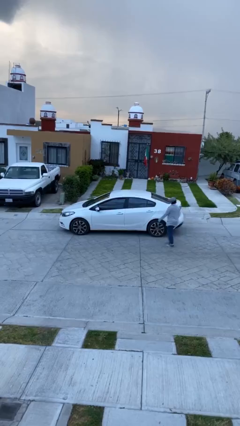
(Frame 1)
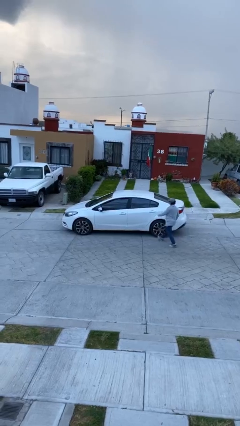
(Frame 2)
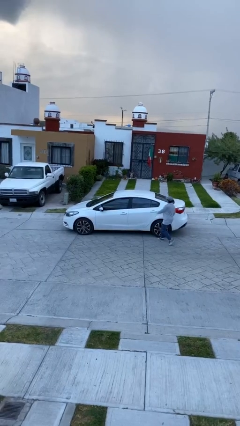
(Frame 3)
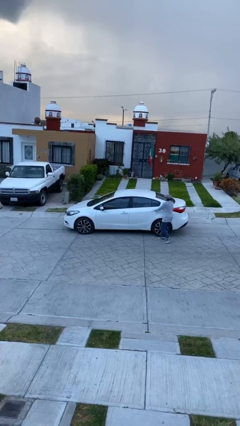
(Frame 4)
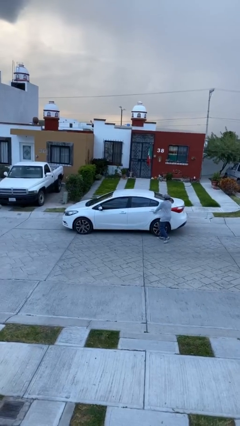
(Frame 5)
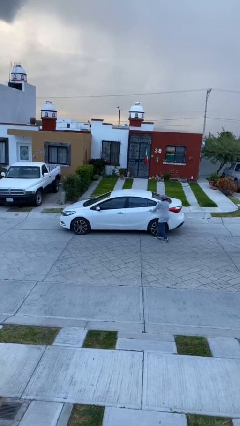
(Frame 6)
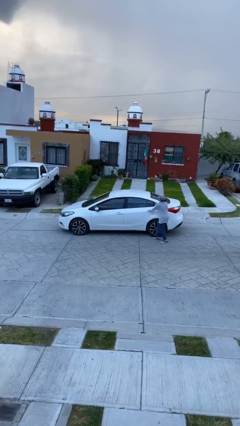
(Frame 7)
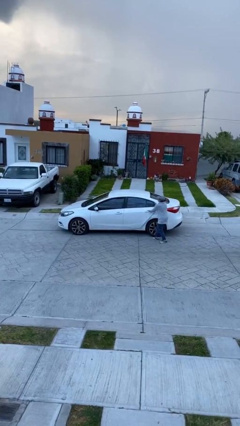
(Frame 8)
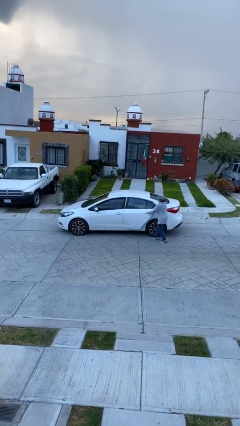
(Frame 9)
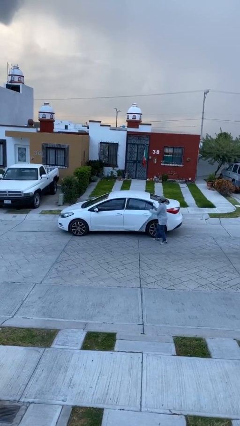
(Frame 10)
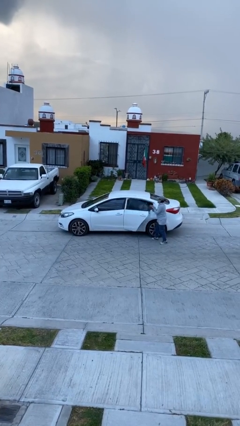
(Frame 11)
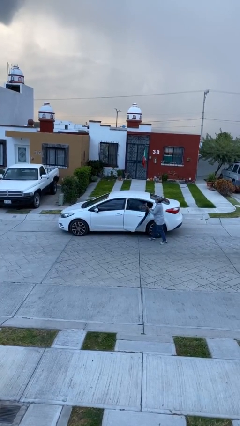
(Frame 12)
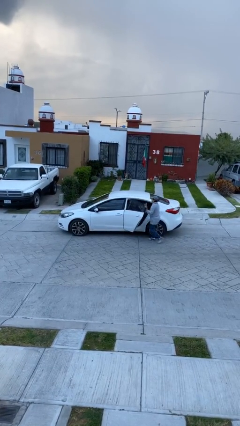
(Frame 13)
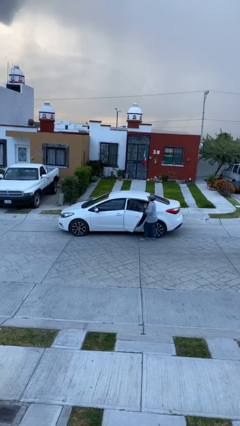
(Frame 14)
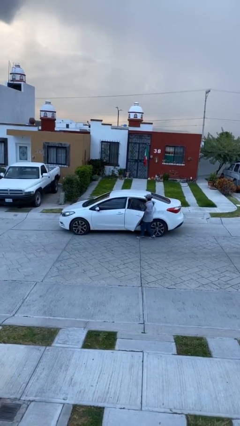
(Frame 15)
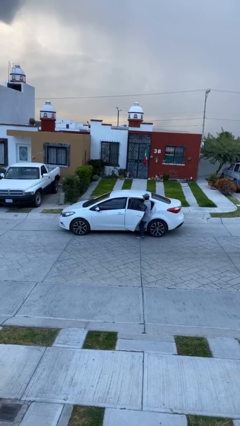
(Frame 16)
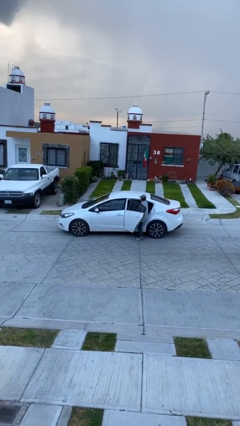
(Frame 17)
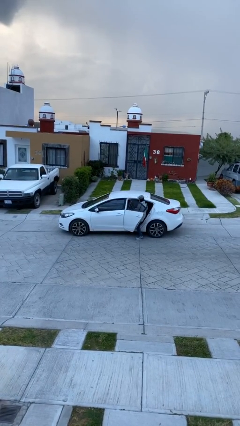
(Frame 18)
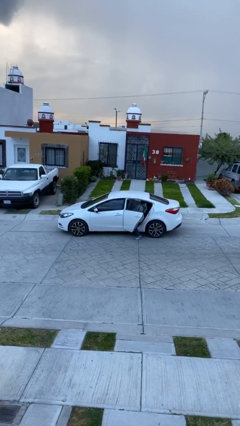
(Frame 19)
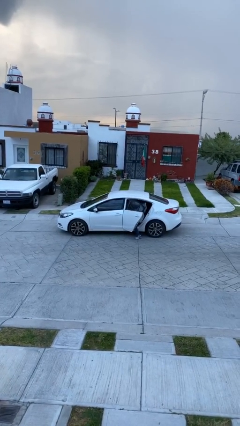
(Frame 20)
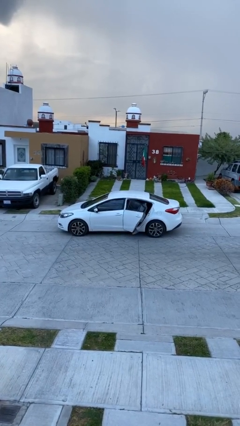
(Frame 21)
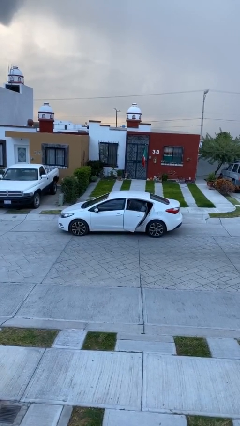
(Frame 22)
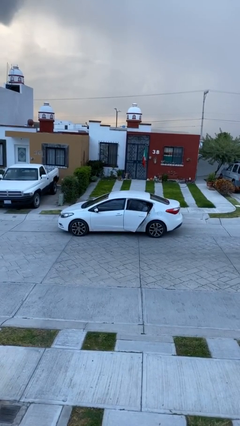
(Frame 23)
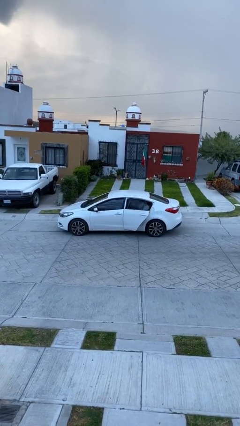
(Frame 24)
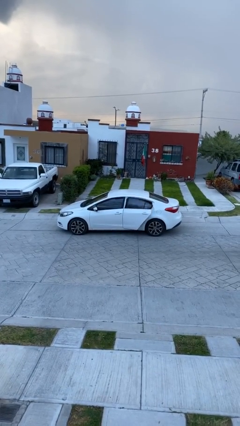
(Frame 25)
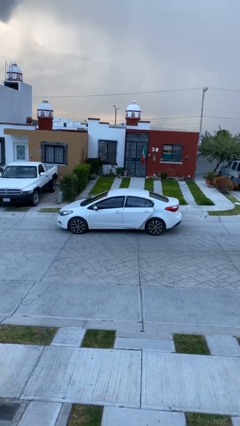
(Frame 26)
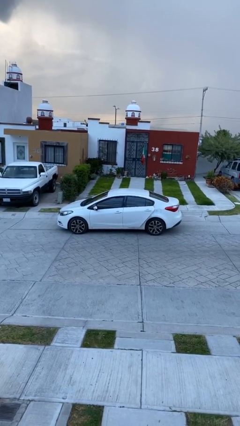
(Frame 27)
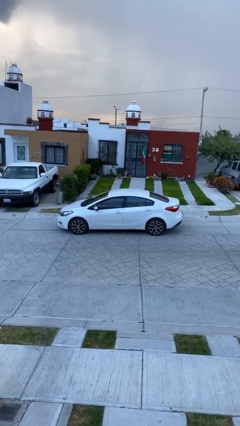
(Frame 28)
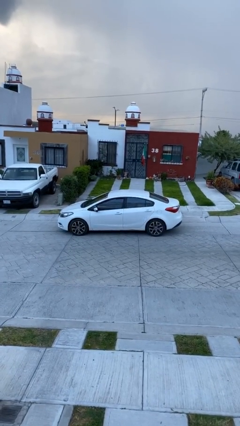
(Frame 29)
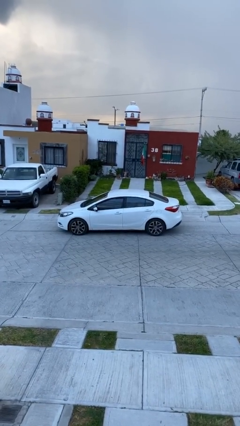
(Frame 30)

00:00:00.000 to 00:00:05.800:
car picks up person

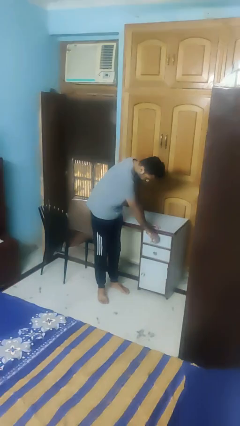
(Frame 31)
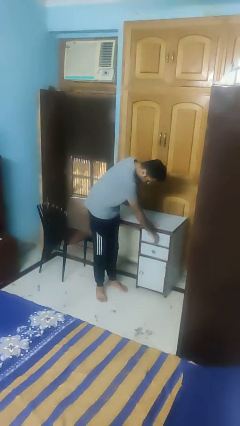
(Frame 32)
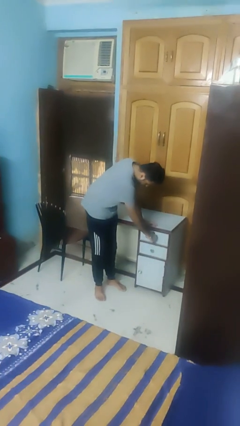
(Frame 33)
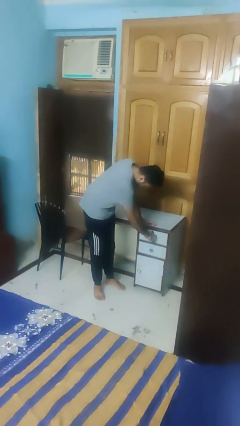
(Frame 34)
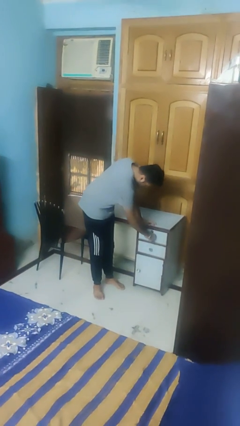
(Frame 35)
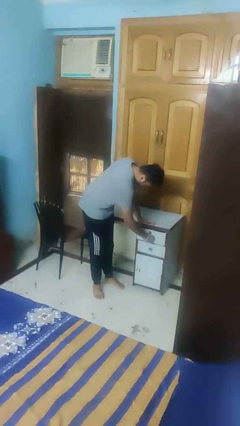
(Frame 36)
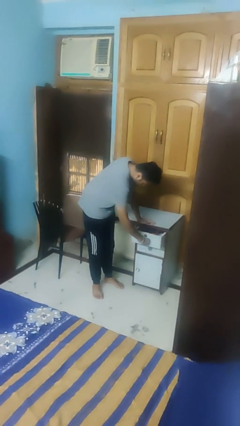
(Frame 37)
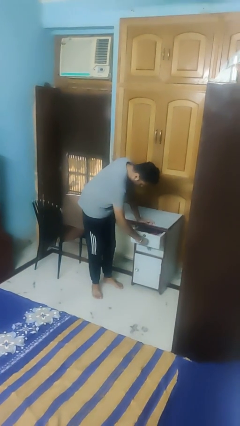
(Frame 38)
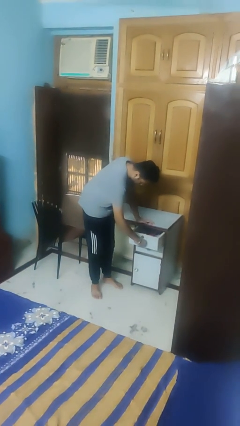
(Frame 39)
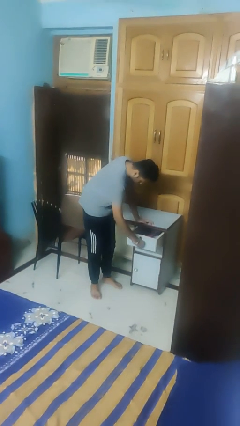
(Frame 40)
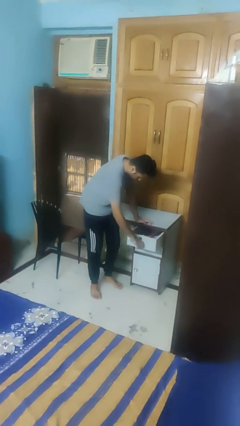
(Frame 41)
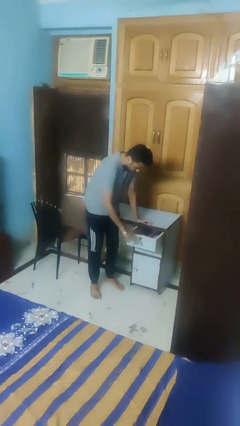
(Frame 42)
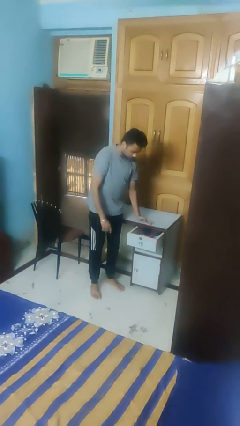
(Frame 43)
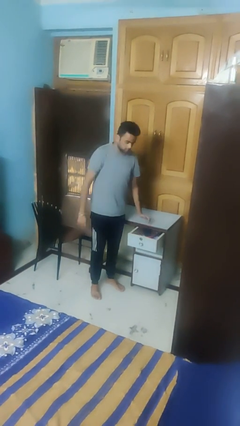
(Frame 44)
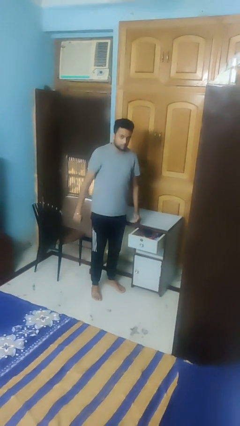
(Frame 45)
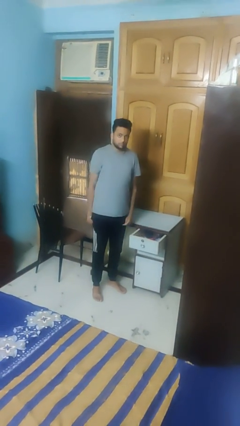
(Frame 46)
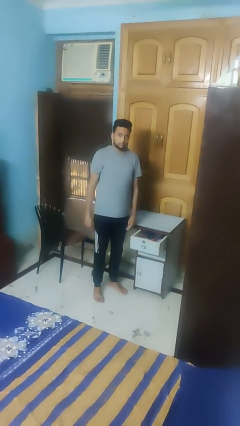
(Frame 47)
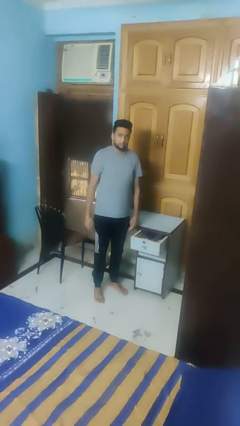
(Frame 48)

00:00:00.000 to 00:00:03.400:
person opens dresser drawer

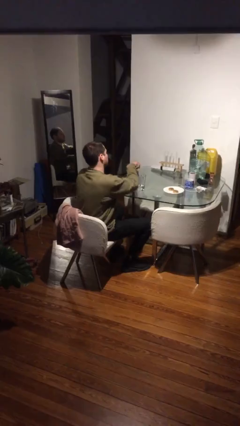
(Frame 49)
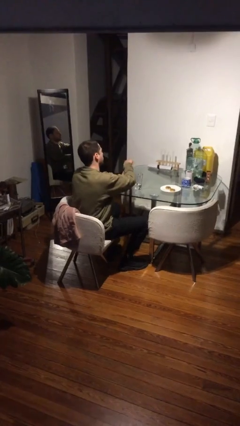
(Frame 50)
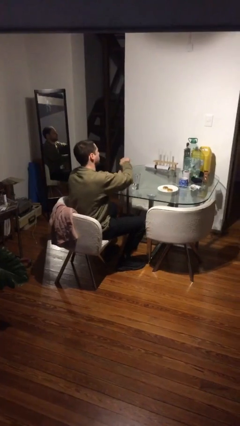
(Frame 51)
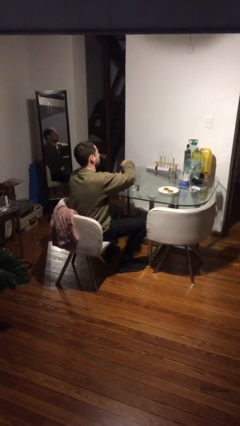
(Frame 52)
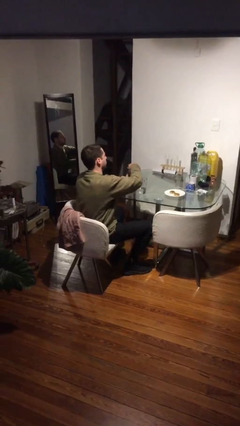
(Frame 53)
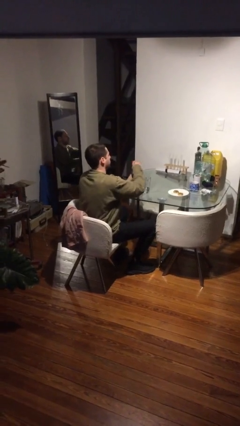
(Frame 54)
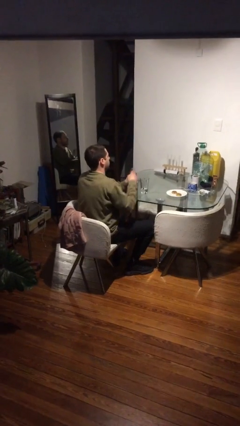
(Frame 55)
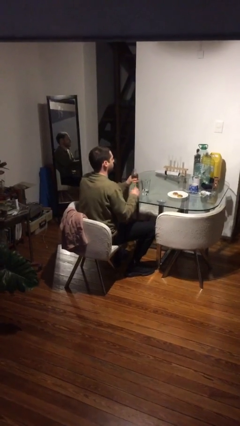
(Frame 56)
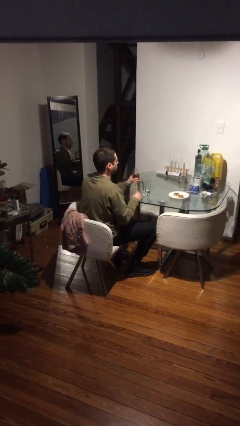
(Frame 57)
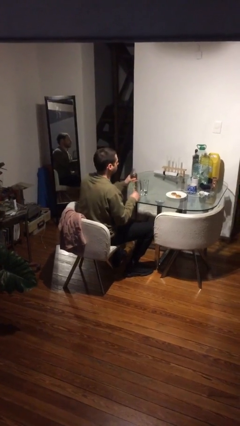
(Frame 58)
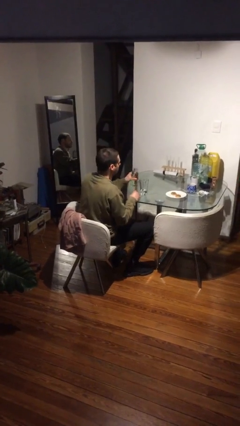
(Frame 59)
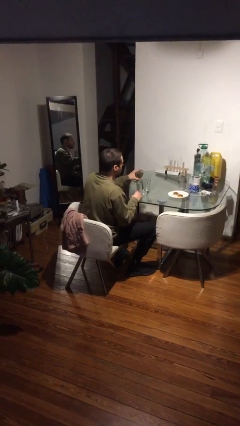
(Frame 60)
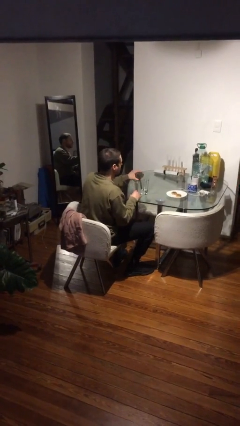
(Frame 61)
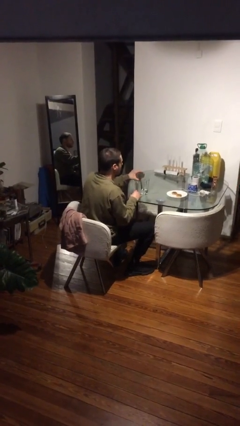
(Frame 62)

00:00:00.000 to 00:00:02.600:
person unscrews lid from bottle

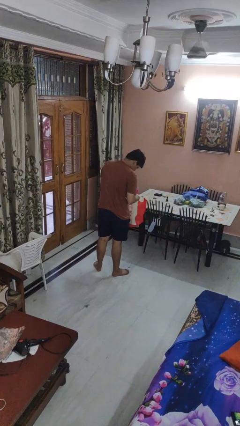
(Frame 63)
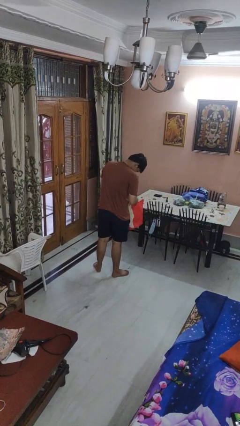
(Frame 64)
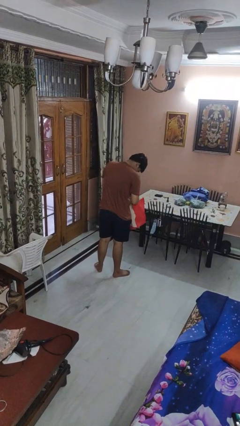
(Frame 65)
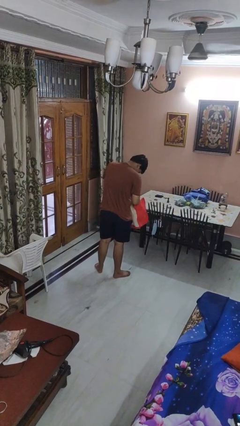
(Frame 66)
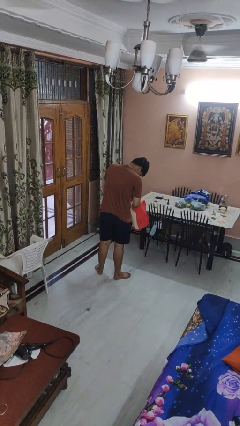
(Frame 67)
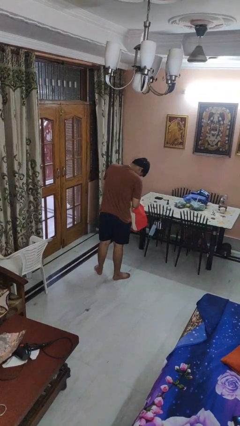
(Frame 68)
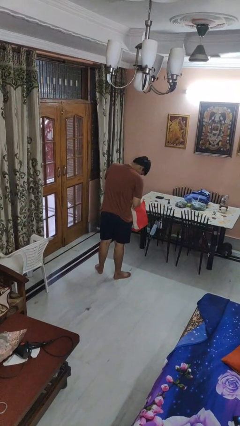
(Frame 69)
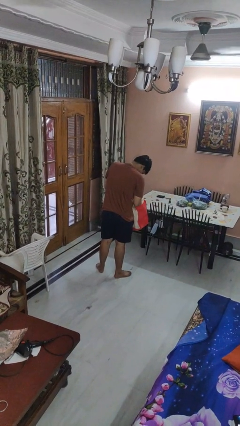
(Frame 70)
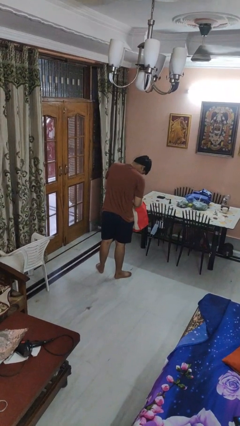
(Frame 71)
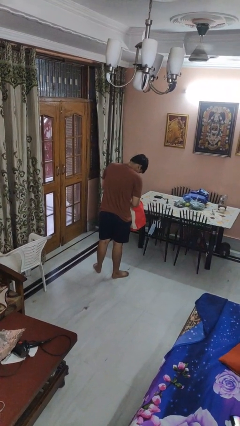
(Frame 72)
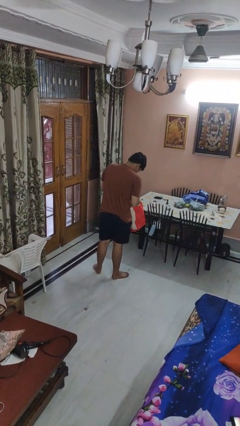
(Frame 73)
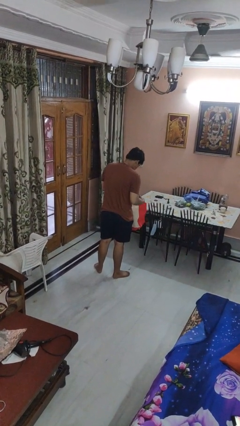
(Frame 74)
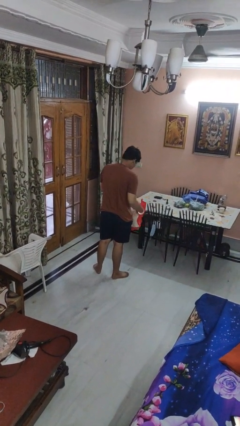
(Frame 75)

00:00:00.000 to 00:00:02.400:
person searches in bag

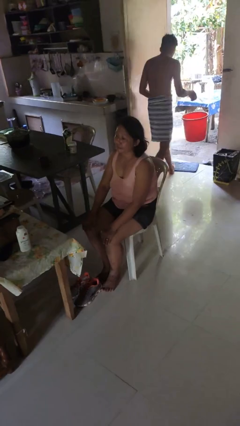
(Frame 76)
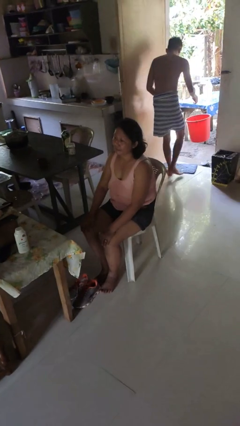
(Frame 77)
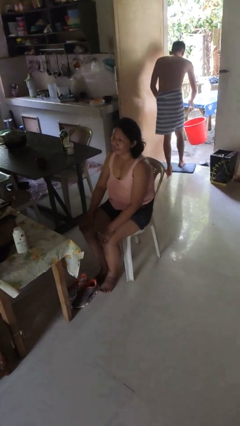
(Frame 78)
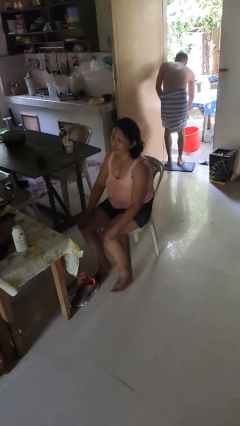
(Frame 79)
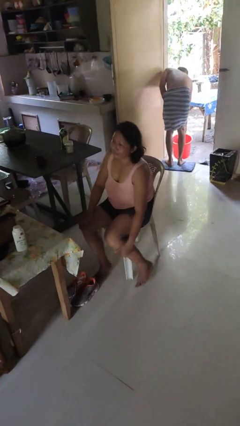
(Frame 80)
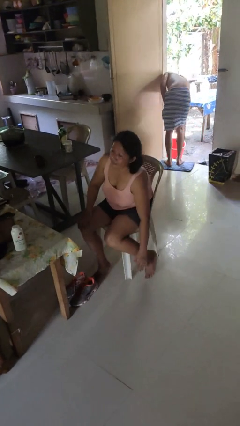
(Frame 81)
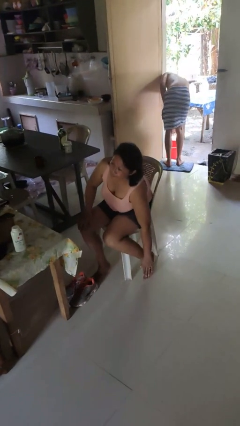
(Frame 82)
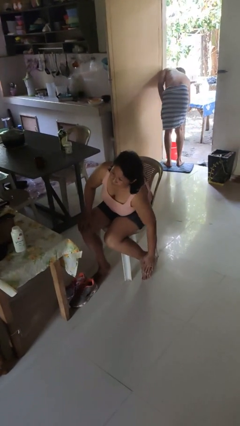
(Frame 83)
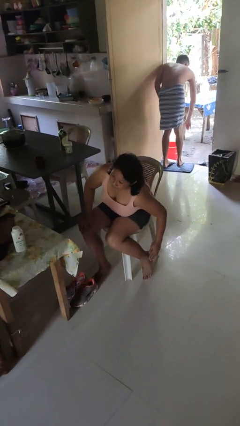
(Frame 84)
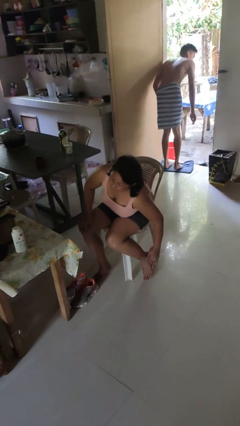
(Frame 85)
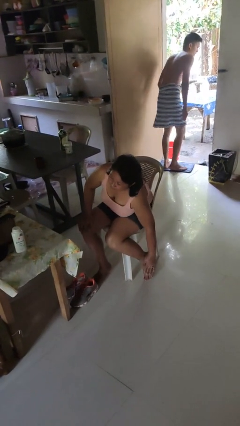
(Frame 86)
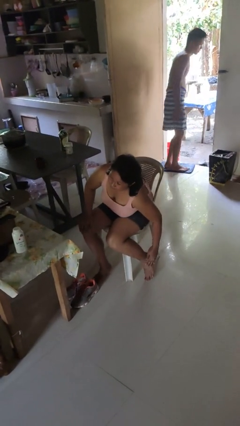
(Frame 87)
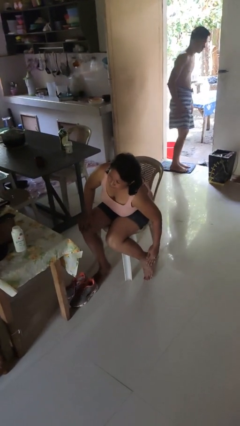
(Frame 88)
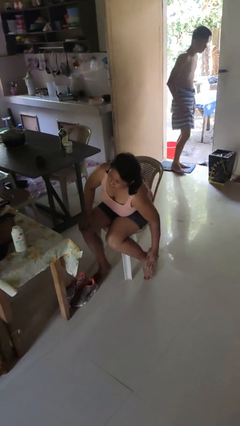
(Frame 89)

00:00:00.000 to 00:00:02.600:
person rubs foot

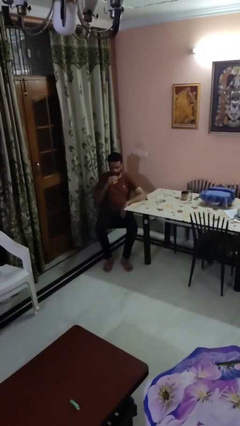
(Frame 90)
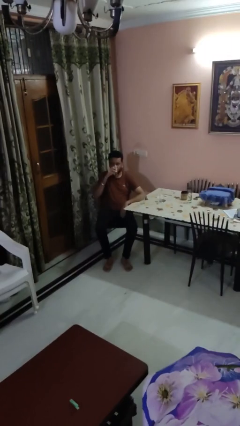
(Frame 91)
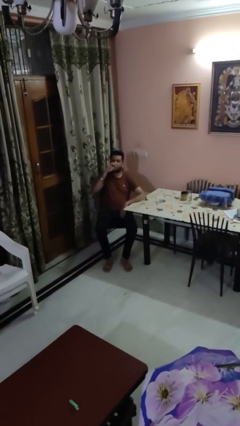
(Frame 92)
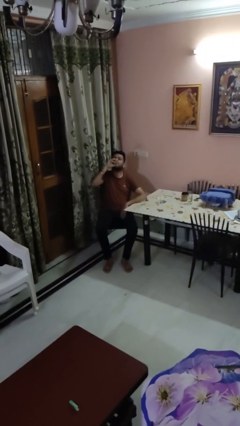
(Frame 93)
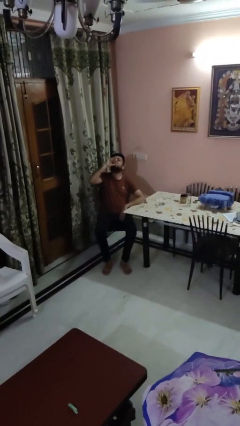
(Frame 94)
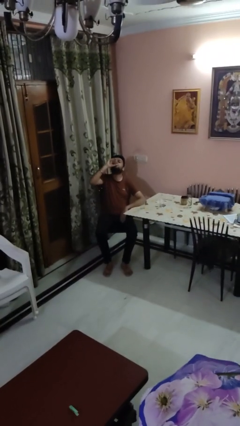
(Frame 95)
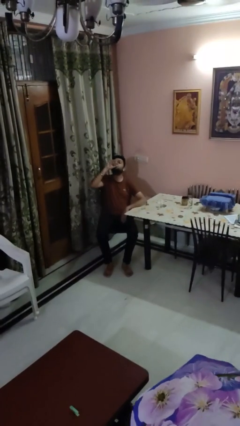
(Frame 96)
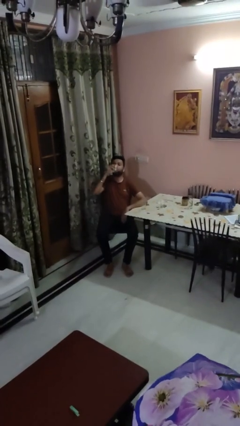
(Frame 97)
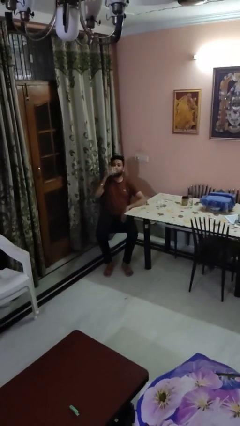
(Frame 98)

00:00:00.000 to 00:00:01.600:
person drinks from shotglass
